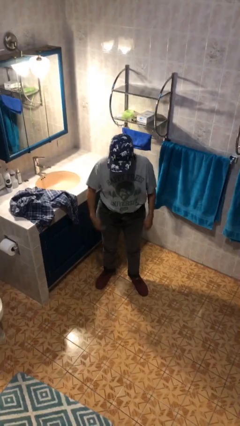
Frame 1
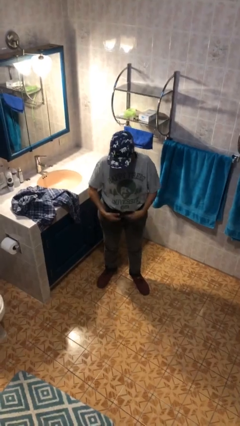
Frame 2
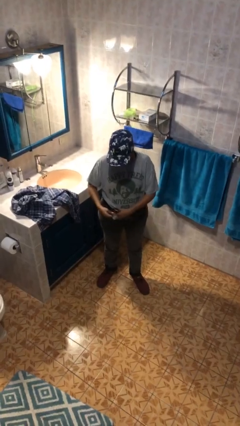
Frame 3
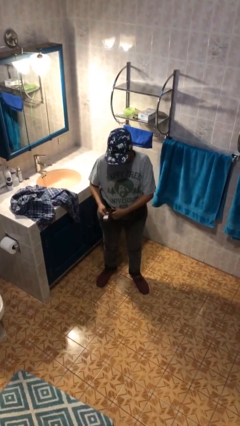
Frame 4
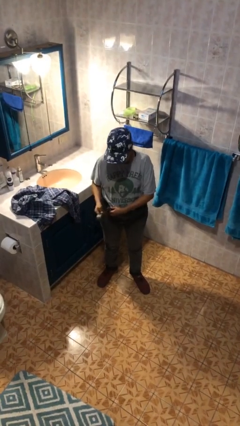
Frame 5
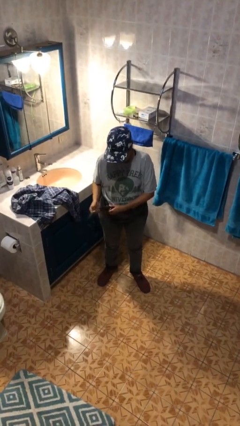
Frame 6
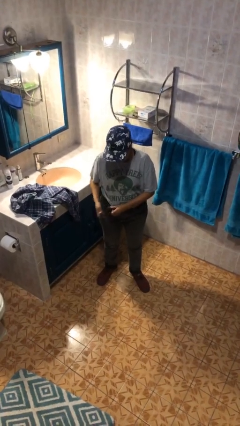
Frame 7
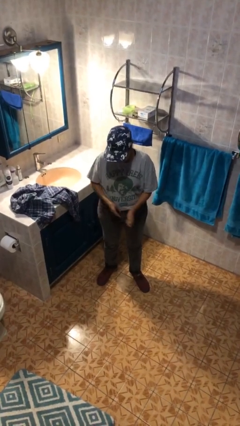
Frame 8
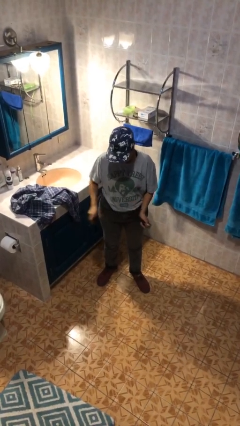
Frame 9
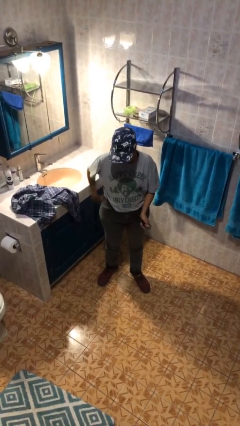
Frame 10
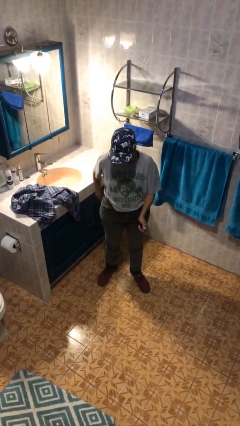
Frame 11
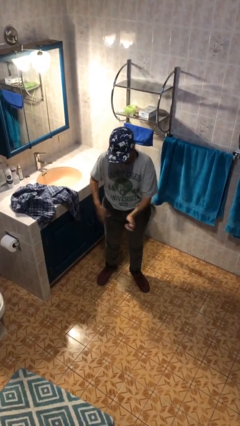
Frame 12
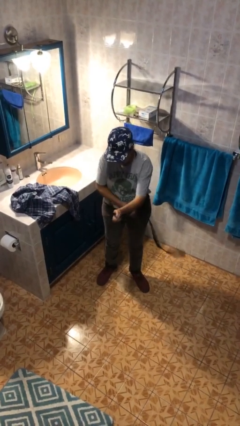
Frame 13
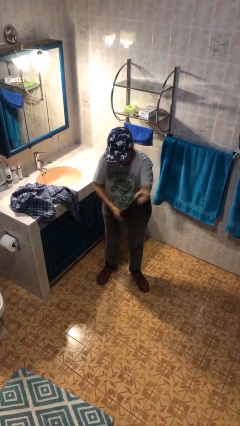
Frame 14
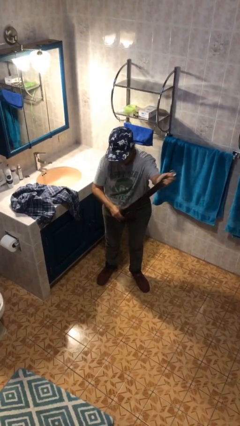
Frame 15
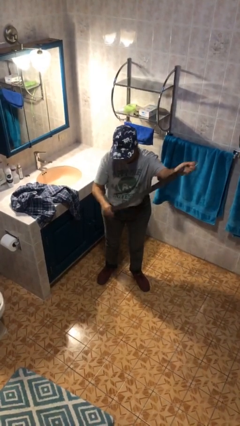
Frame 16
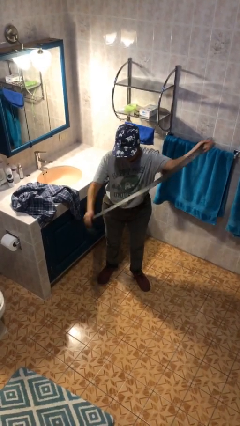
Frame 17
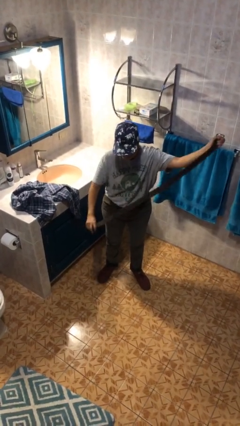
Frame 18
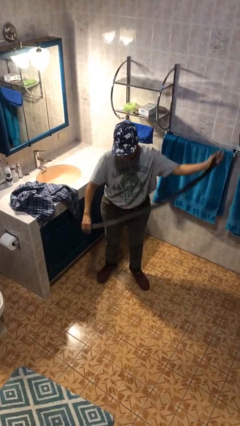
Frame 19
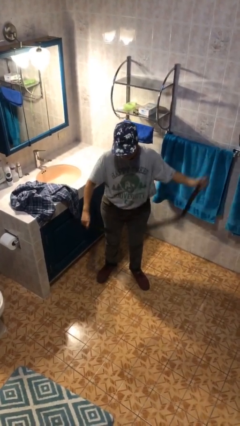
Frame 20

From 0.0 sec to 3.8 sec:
person takes off belt

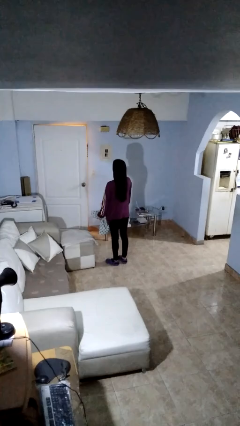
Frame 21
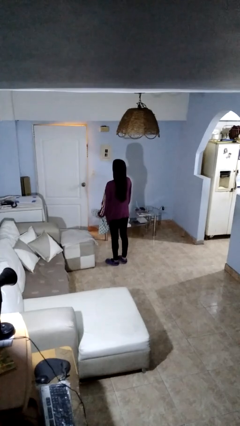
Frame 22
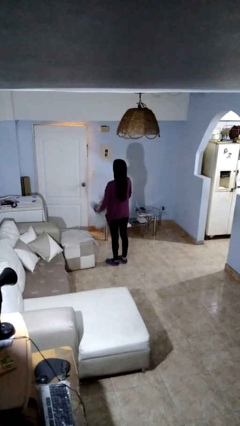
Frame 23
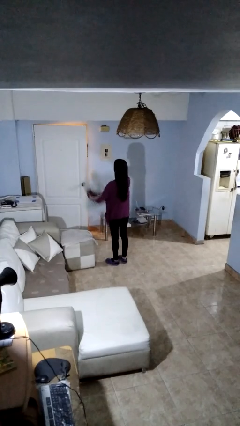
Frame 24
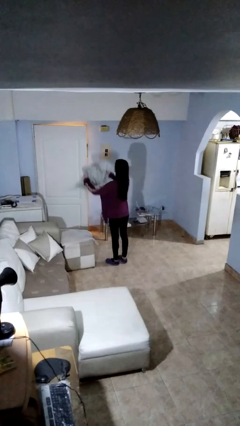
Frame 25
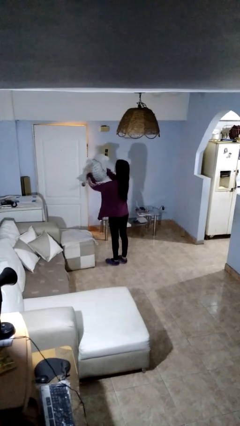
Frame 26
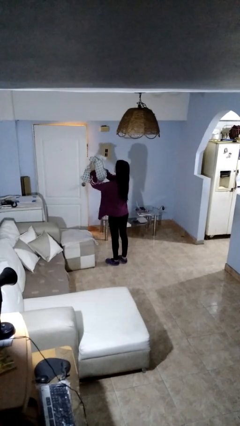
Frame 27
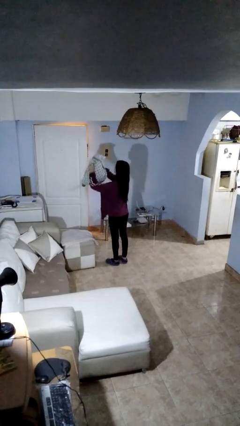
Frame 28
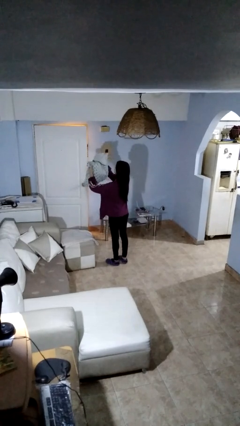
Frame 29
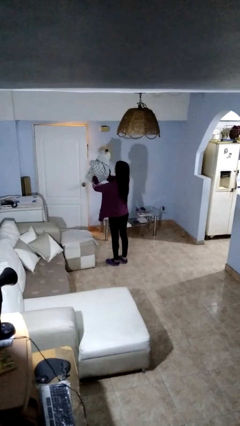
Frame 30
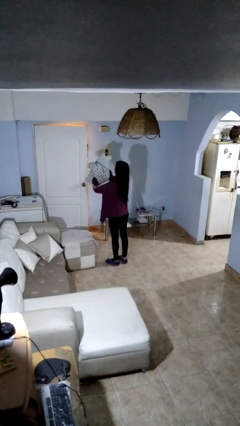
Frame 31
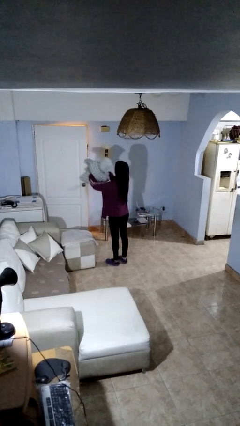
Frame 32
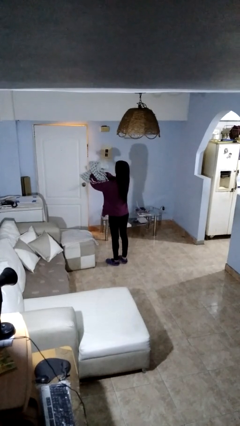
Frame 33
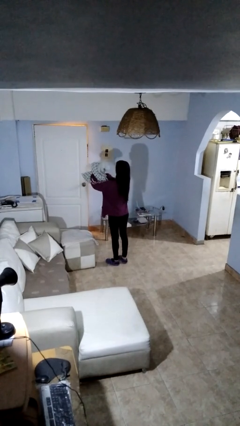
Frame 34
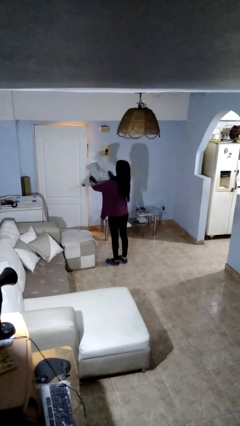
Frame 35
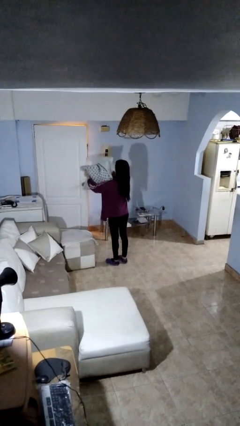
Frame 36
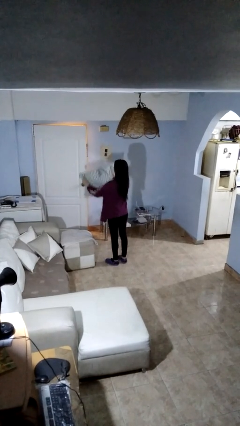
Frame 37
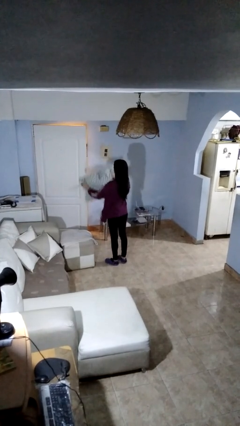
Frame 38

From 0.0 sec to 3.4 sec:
person squeezes object

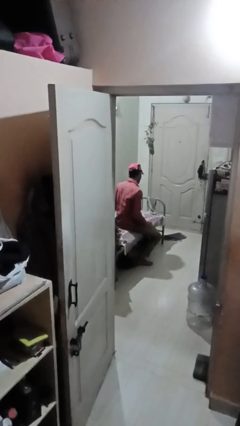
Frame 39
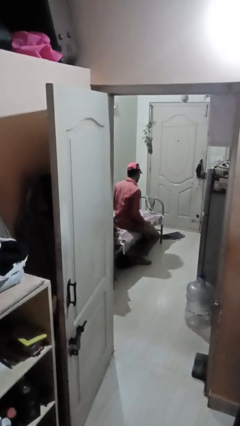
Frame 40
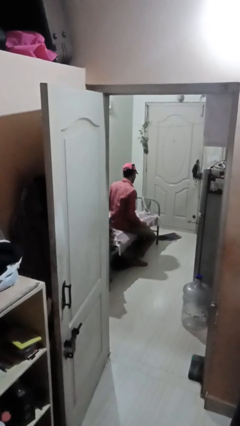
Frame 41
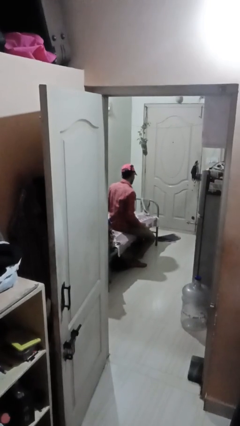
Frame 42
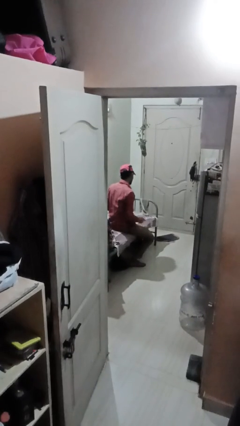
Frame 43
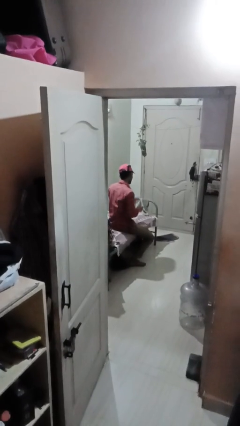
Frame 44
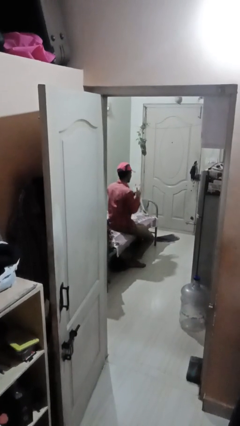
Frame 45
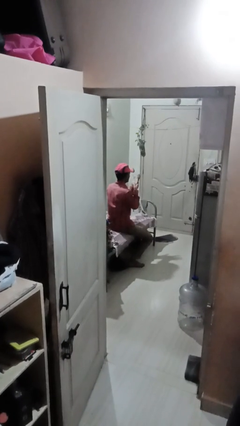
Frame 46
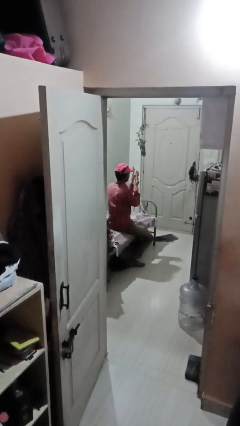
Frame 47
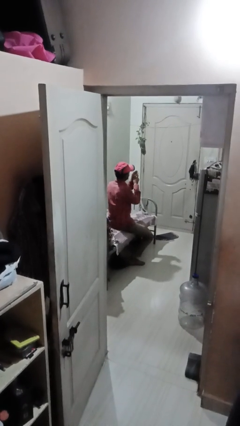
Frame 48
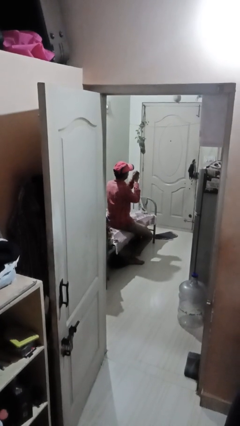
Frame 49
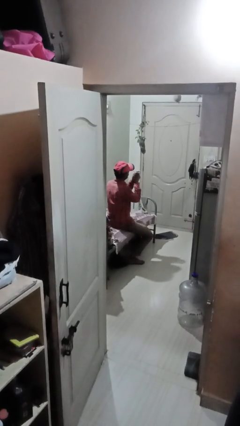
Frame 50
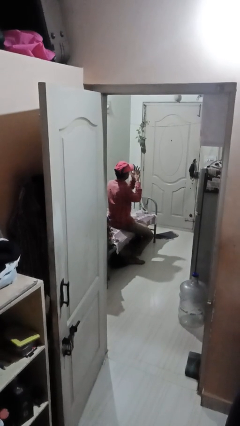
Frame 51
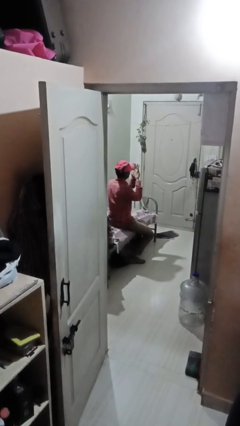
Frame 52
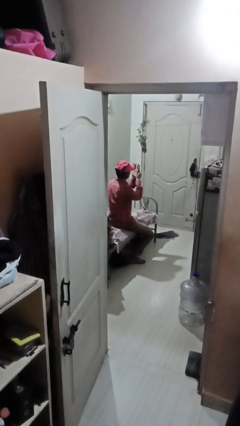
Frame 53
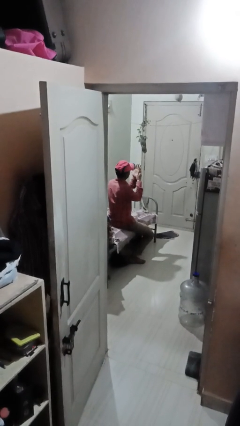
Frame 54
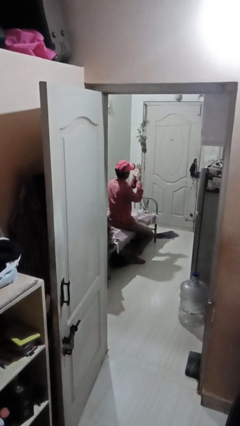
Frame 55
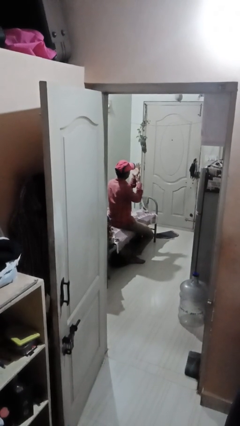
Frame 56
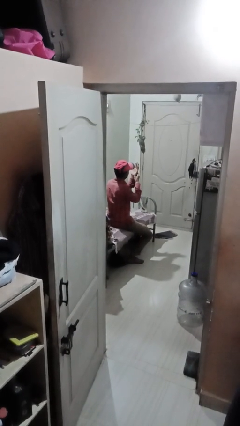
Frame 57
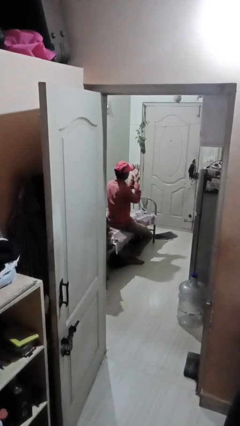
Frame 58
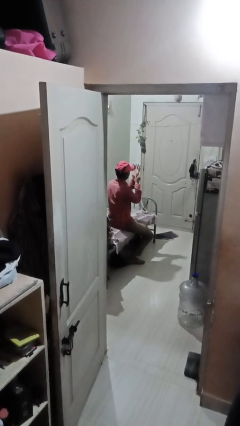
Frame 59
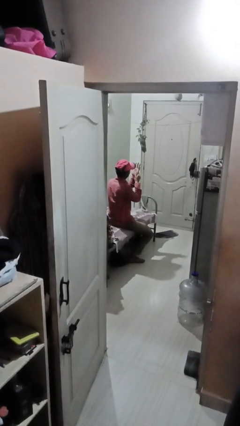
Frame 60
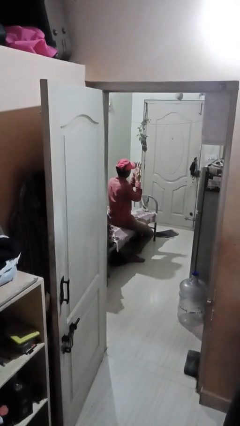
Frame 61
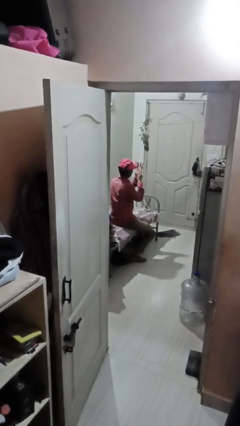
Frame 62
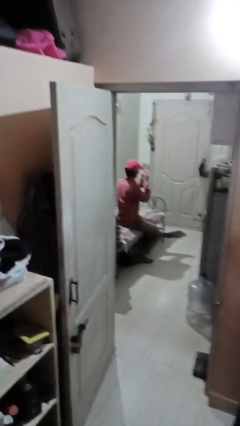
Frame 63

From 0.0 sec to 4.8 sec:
person looks at hands in lap

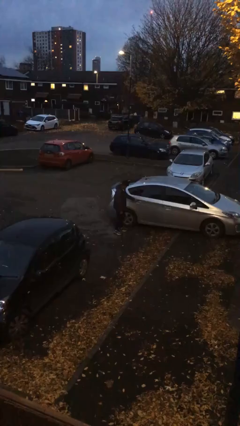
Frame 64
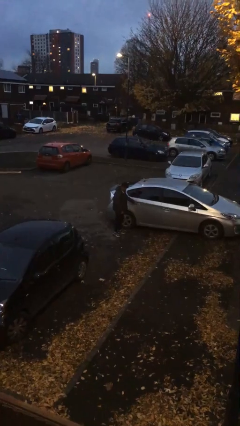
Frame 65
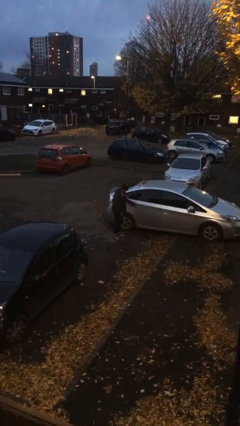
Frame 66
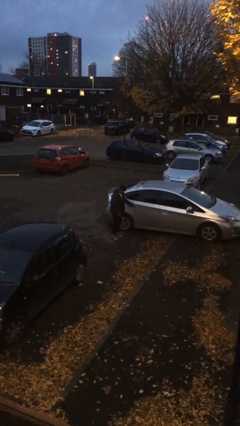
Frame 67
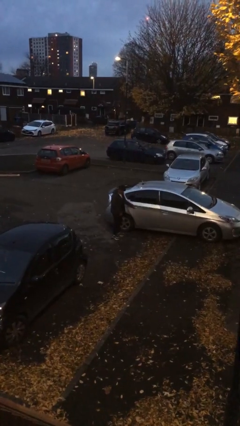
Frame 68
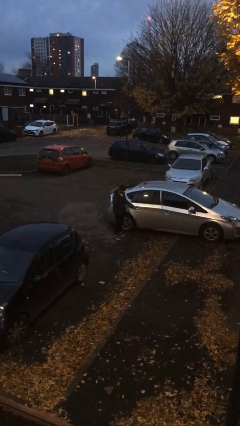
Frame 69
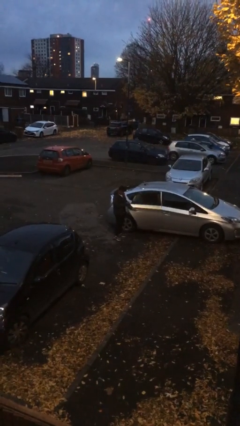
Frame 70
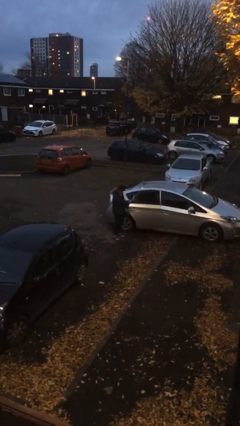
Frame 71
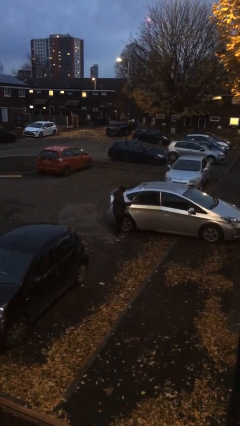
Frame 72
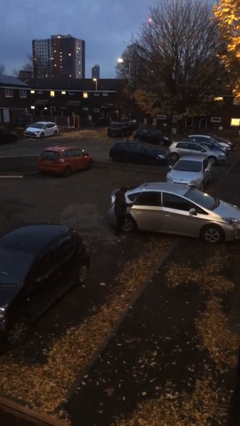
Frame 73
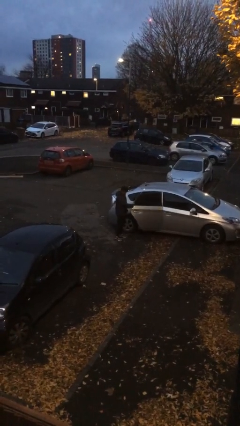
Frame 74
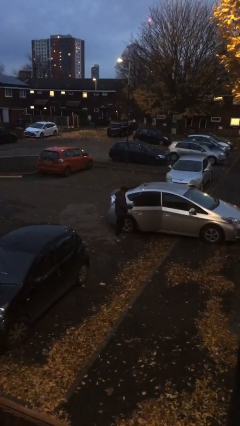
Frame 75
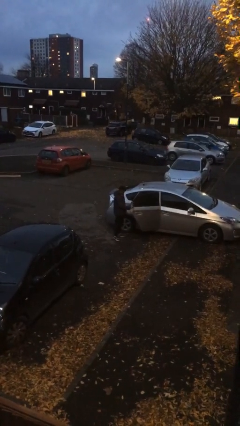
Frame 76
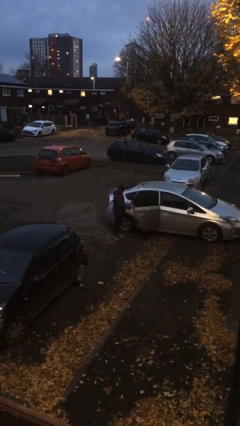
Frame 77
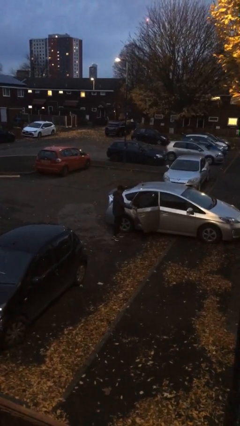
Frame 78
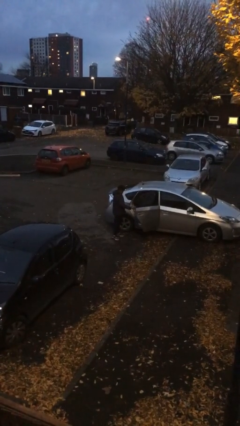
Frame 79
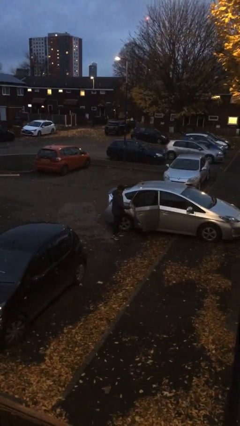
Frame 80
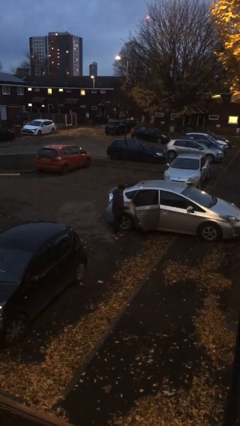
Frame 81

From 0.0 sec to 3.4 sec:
person opens car door

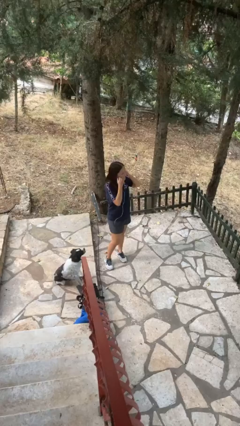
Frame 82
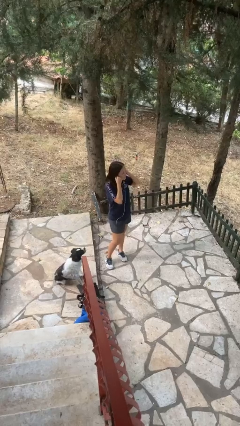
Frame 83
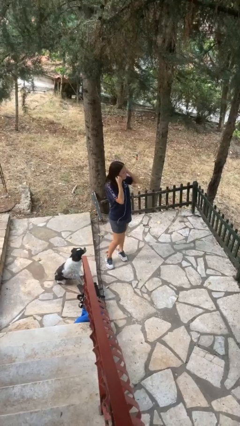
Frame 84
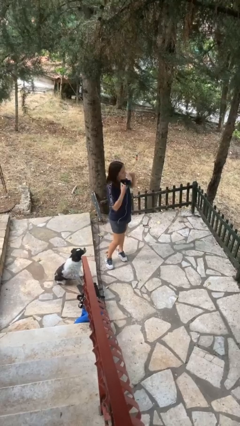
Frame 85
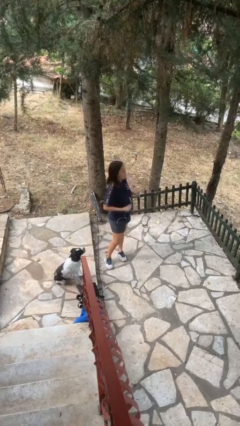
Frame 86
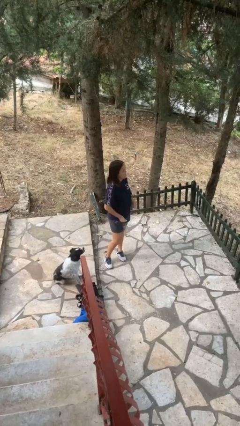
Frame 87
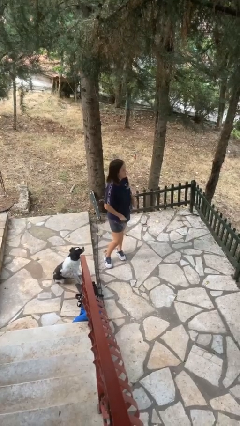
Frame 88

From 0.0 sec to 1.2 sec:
person takes off headphones

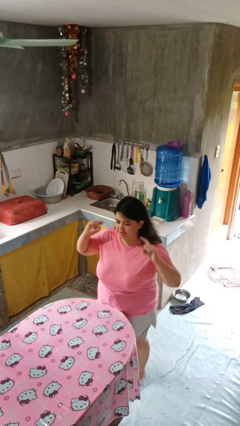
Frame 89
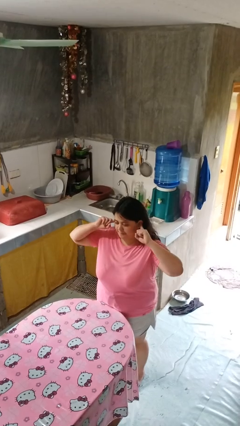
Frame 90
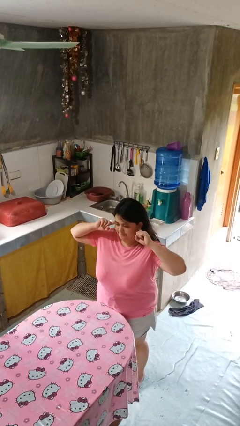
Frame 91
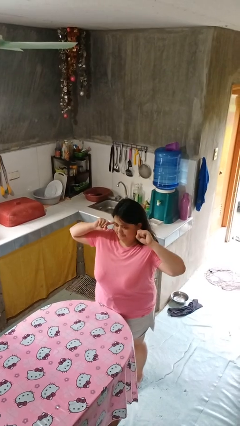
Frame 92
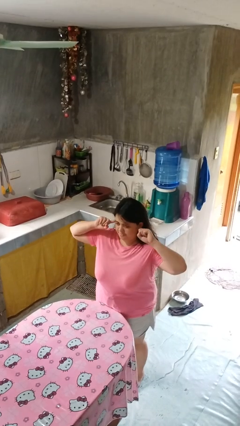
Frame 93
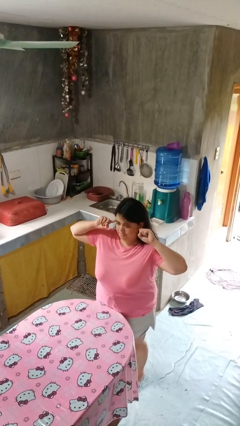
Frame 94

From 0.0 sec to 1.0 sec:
person puts fingers in ear
